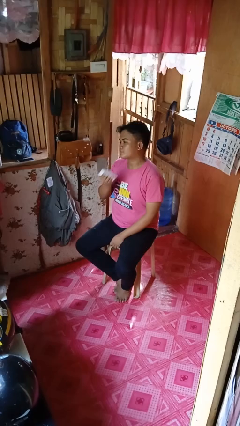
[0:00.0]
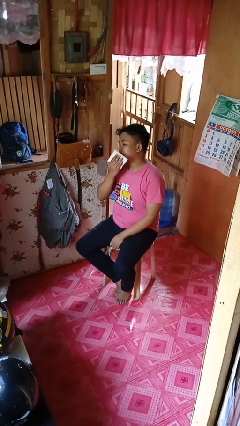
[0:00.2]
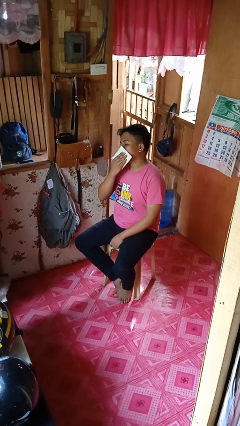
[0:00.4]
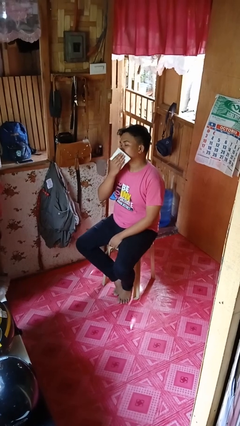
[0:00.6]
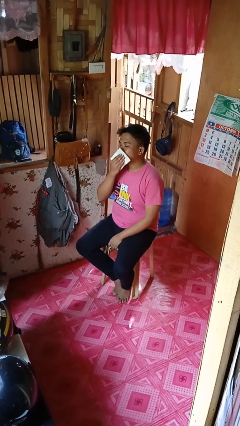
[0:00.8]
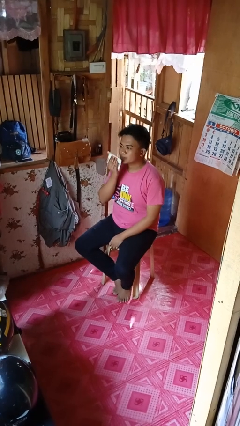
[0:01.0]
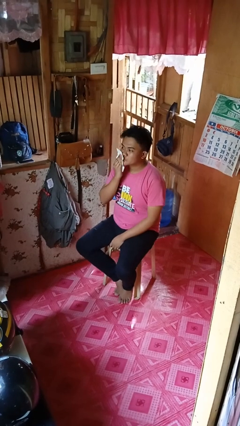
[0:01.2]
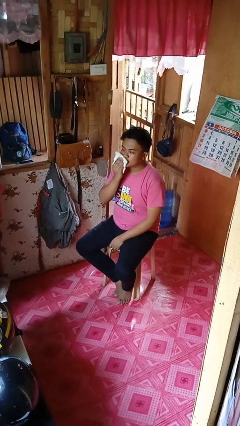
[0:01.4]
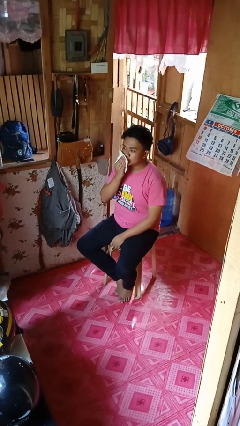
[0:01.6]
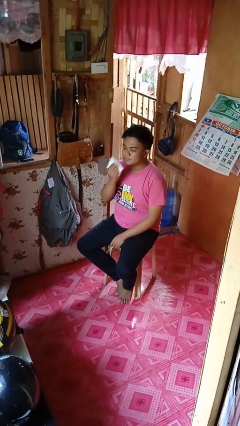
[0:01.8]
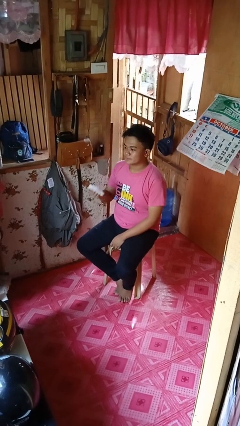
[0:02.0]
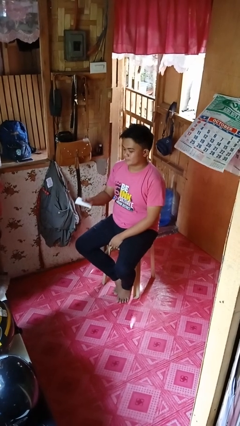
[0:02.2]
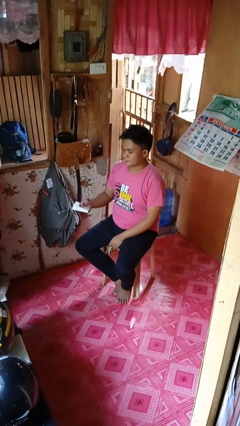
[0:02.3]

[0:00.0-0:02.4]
person wipes mouth with napkin

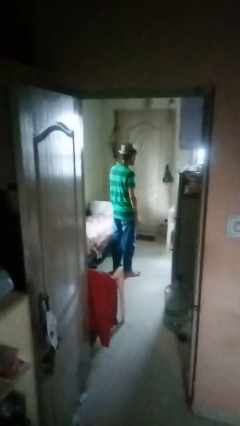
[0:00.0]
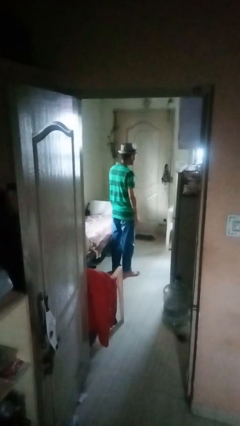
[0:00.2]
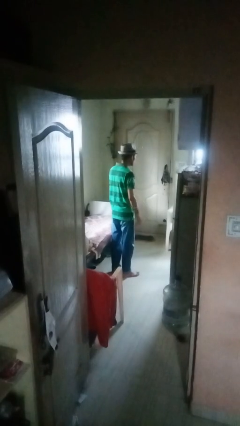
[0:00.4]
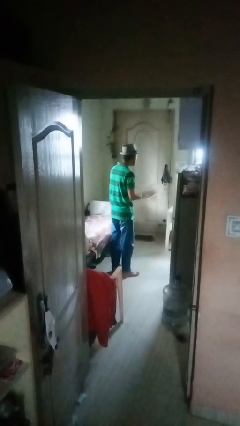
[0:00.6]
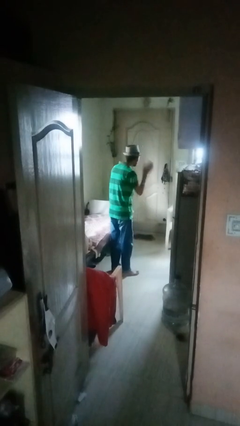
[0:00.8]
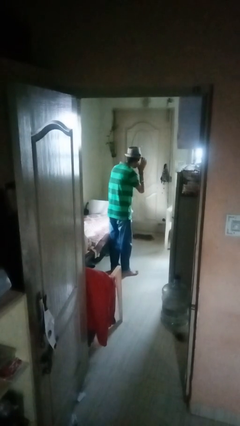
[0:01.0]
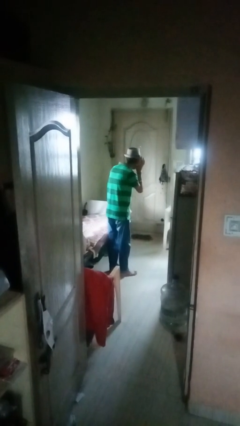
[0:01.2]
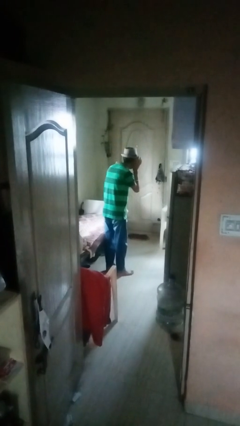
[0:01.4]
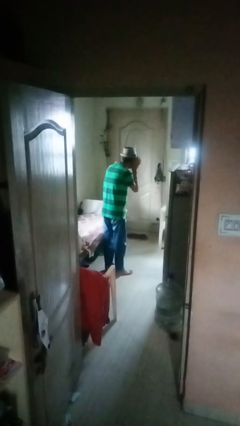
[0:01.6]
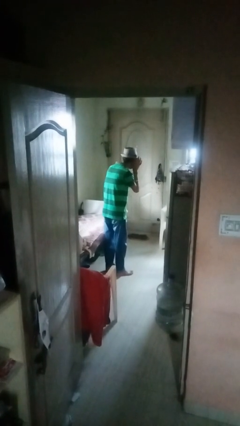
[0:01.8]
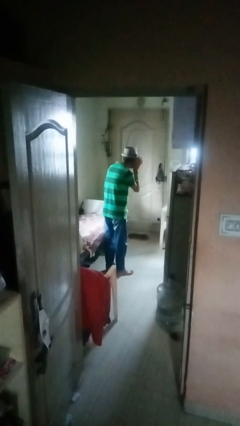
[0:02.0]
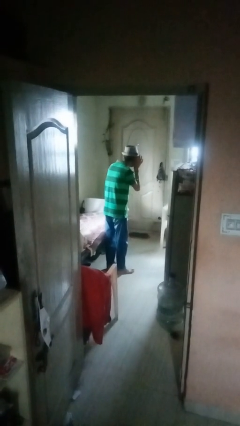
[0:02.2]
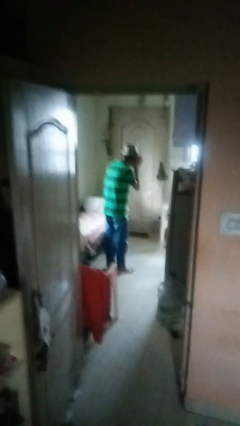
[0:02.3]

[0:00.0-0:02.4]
person gestures listen closely

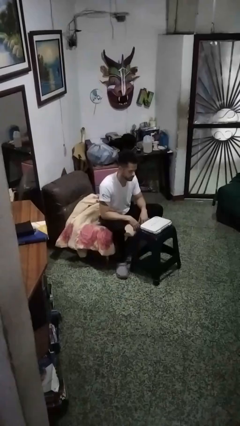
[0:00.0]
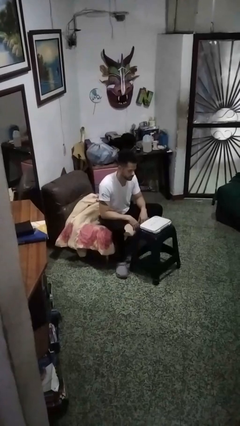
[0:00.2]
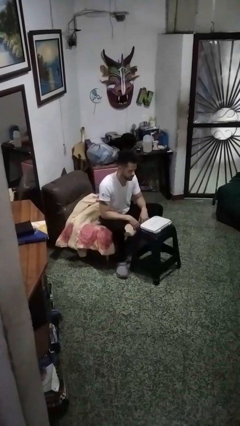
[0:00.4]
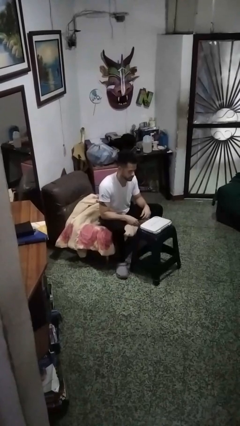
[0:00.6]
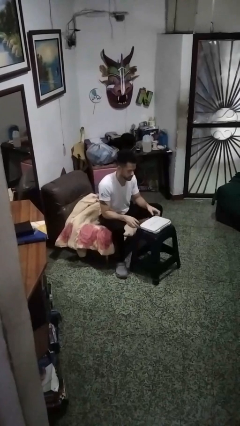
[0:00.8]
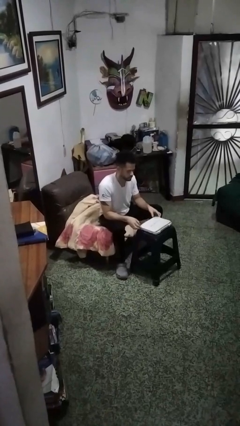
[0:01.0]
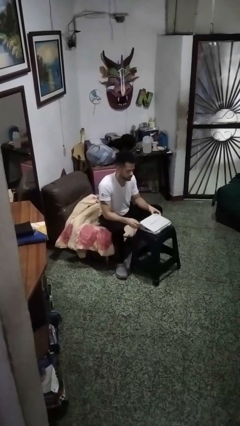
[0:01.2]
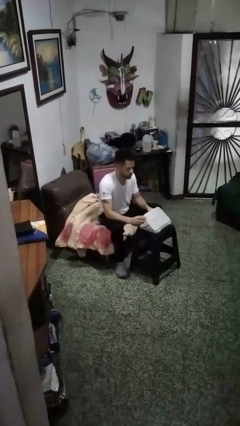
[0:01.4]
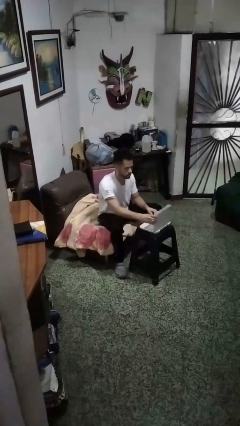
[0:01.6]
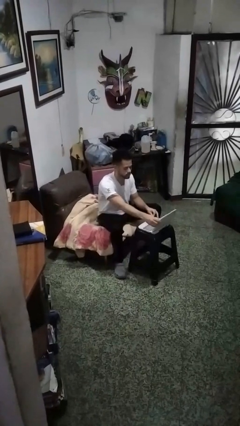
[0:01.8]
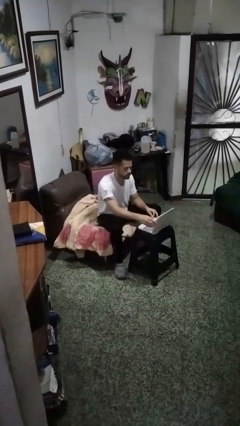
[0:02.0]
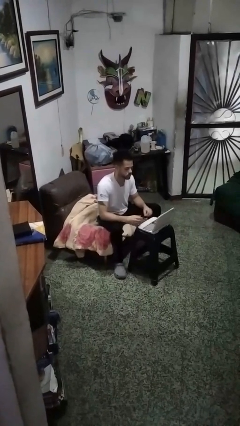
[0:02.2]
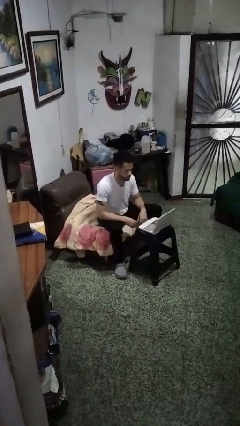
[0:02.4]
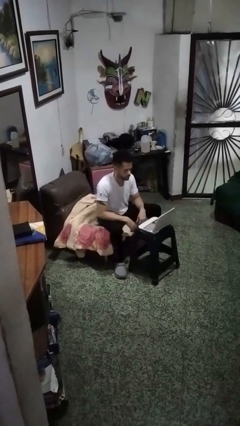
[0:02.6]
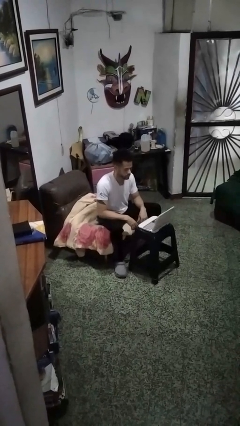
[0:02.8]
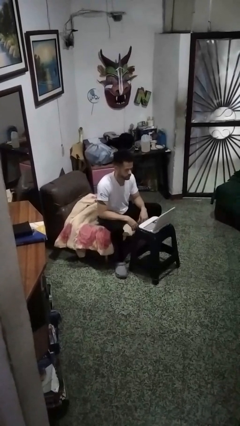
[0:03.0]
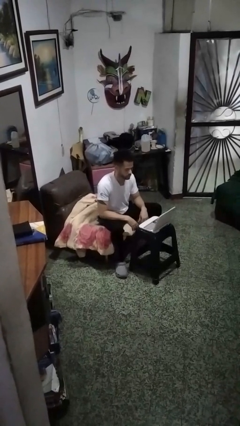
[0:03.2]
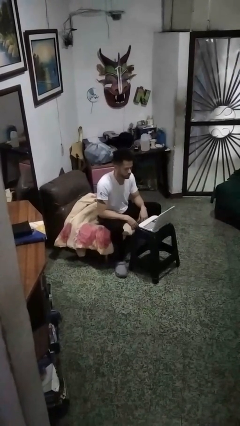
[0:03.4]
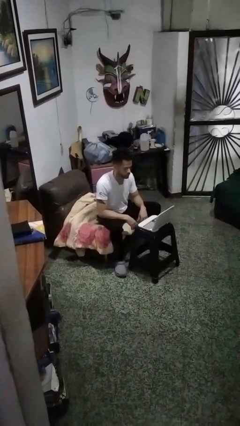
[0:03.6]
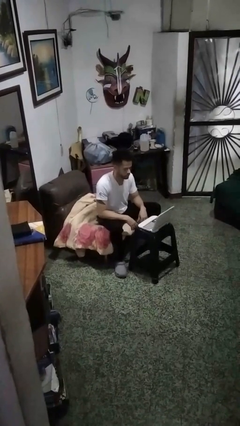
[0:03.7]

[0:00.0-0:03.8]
person opens laptop

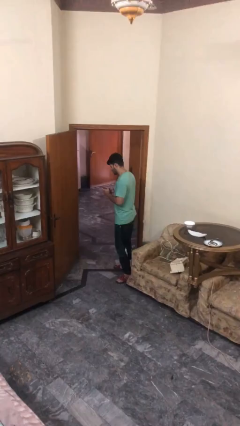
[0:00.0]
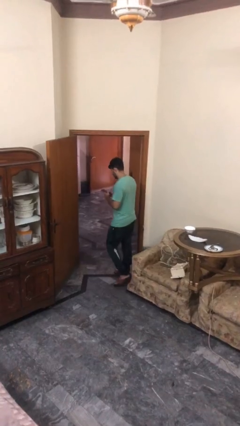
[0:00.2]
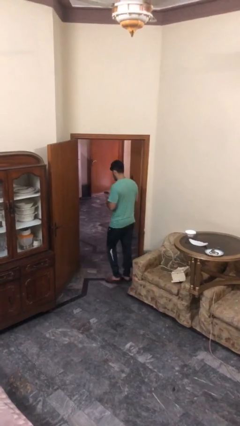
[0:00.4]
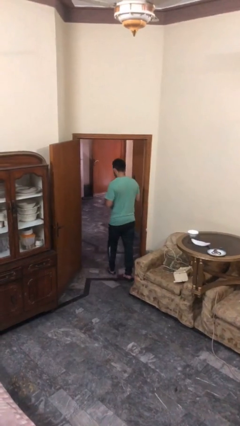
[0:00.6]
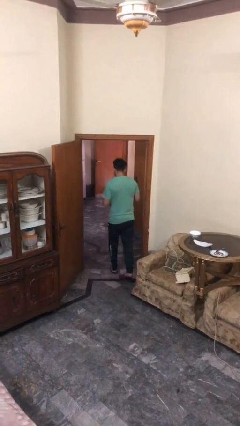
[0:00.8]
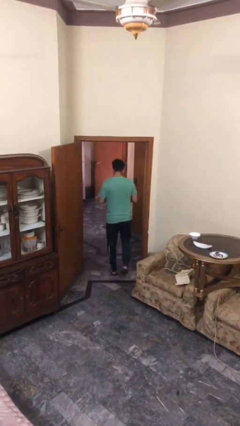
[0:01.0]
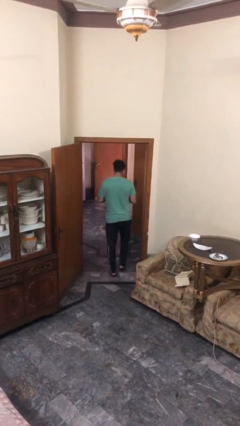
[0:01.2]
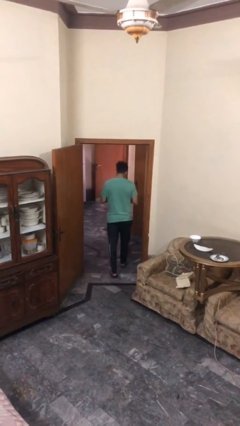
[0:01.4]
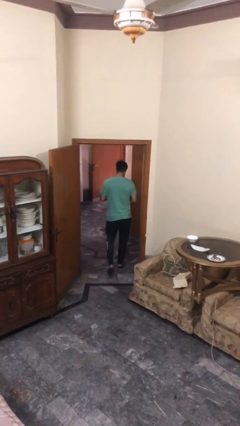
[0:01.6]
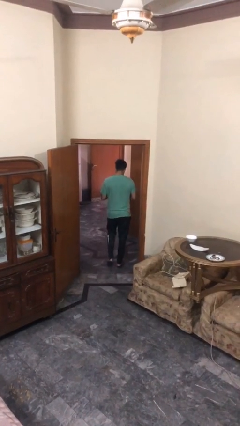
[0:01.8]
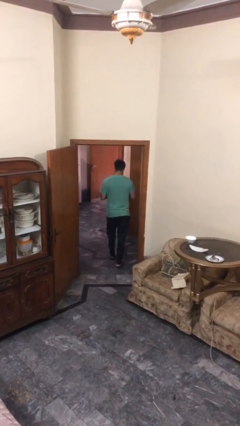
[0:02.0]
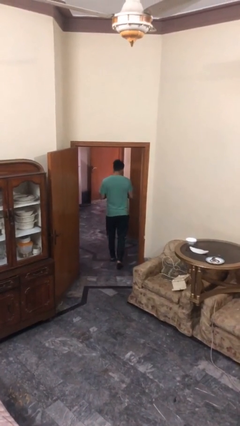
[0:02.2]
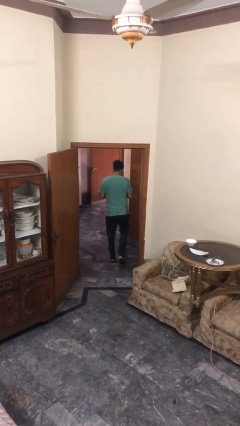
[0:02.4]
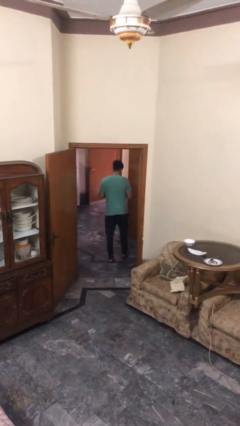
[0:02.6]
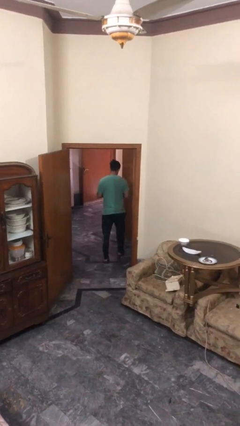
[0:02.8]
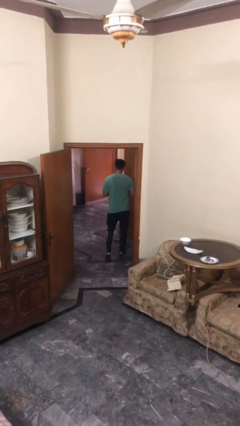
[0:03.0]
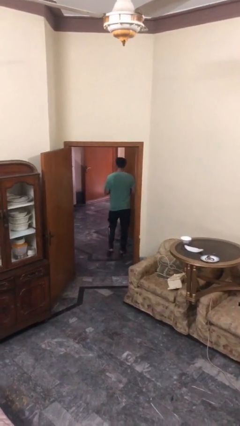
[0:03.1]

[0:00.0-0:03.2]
person exits scene through structure

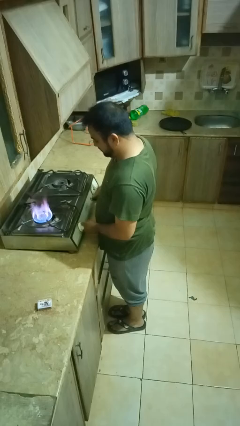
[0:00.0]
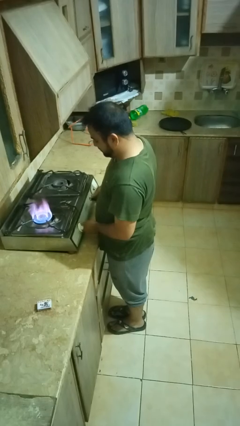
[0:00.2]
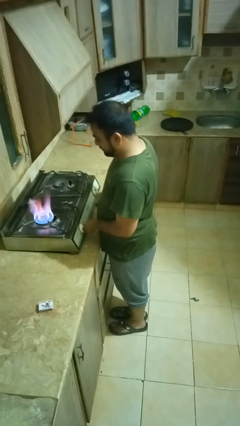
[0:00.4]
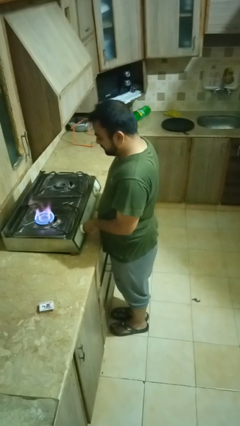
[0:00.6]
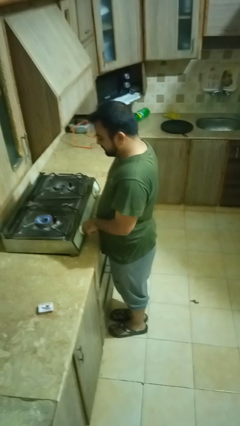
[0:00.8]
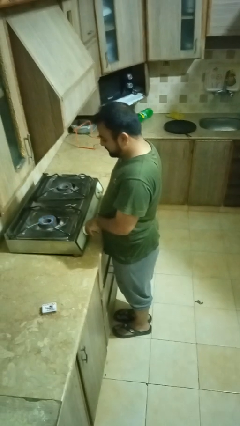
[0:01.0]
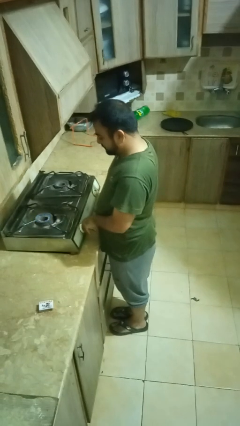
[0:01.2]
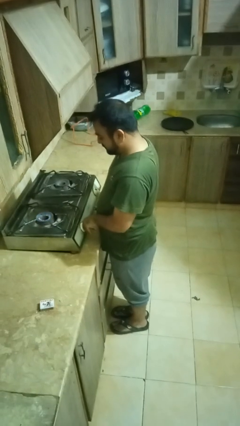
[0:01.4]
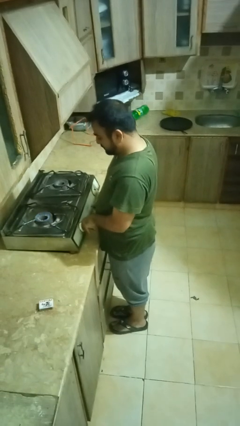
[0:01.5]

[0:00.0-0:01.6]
person turns off stovetop

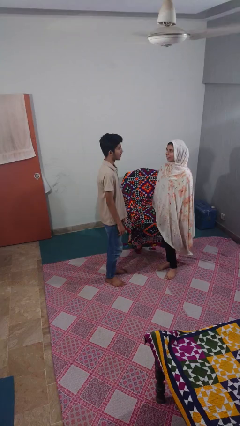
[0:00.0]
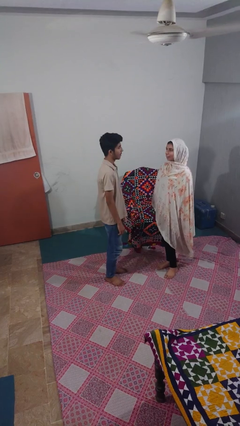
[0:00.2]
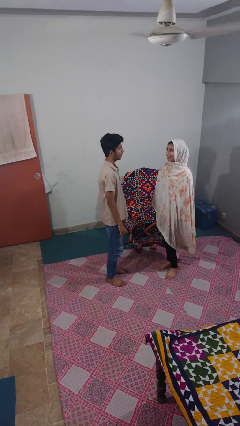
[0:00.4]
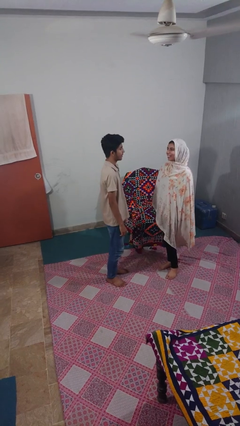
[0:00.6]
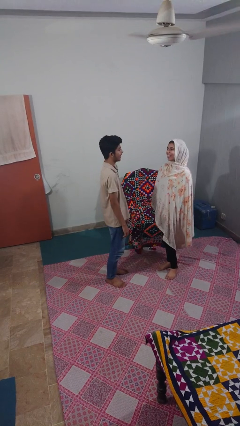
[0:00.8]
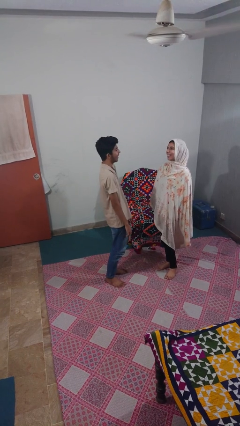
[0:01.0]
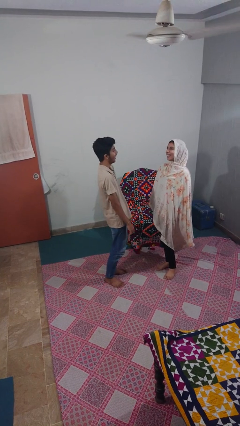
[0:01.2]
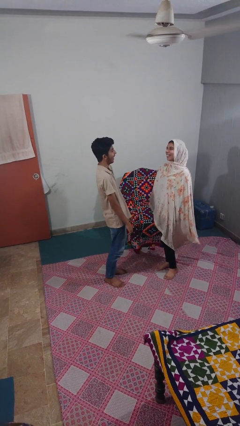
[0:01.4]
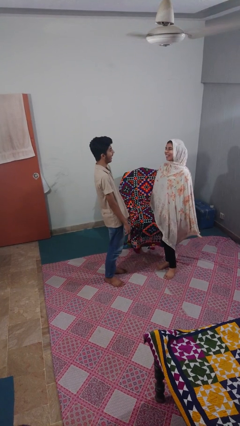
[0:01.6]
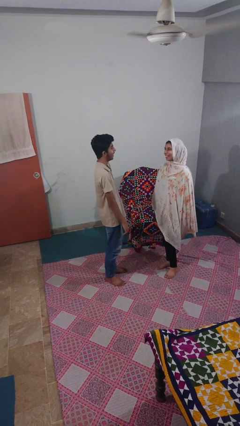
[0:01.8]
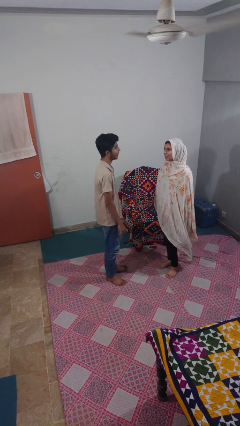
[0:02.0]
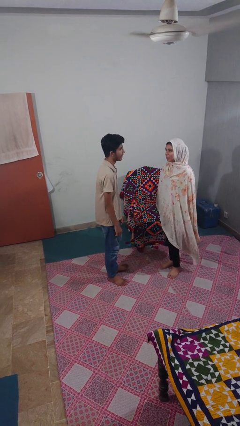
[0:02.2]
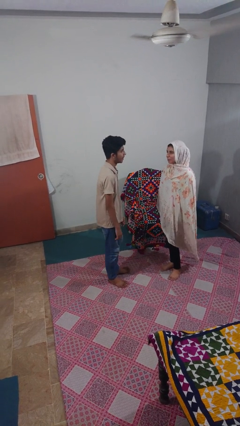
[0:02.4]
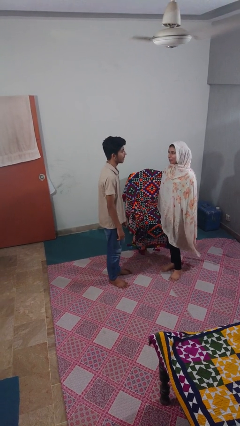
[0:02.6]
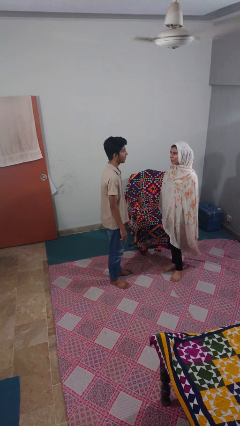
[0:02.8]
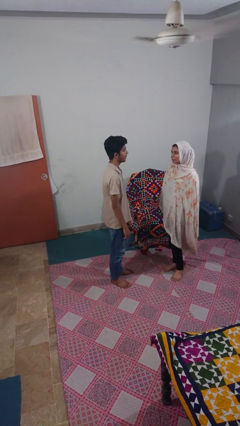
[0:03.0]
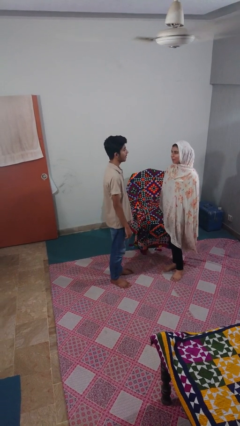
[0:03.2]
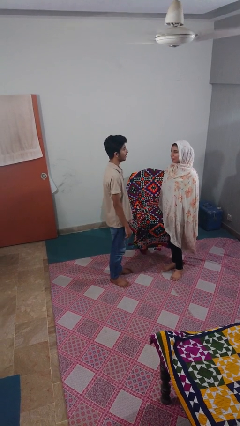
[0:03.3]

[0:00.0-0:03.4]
person laughs with person

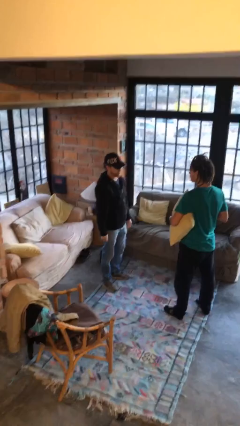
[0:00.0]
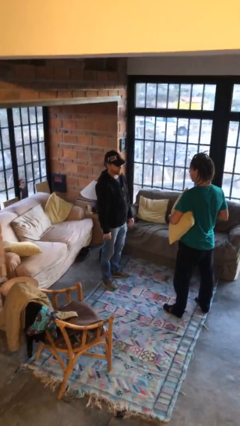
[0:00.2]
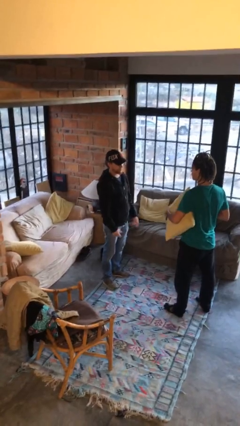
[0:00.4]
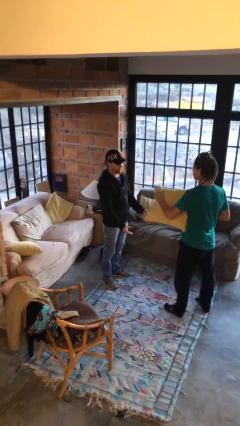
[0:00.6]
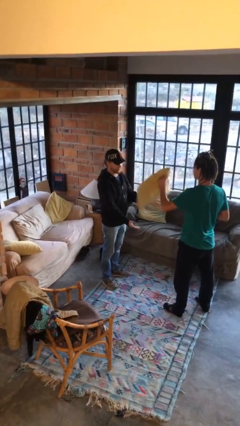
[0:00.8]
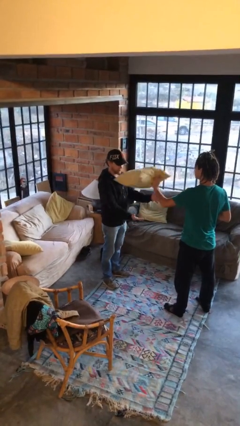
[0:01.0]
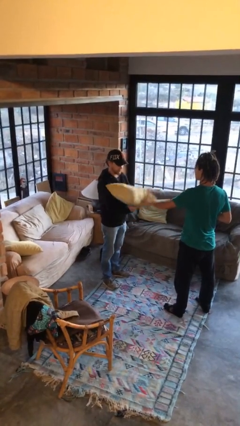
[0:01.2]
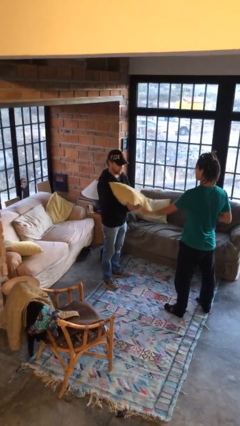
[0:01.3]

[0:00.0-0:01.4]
person transfers object to person
